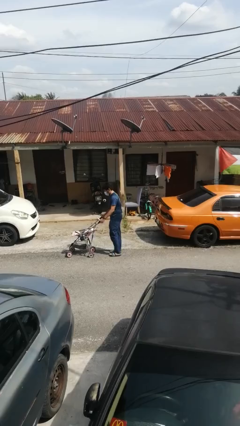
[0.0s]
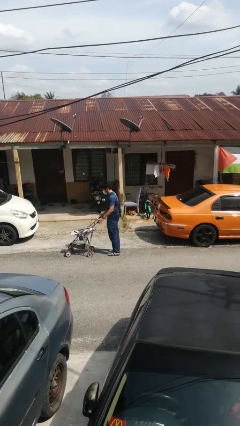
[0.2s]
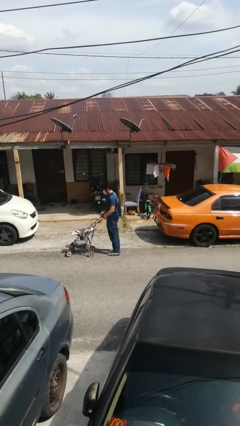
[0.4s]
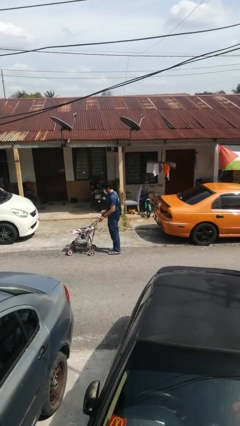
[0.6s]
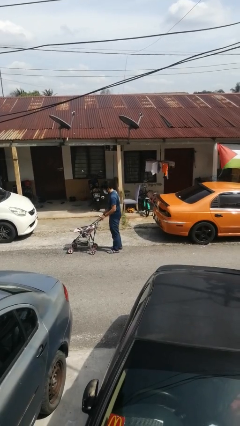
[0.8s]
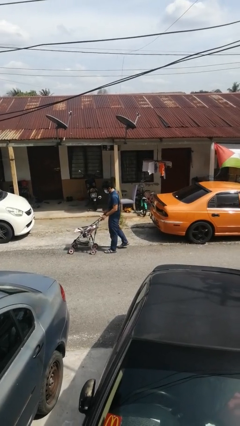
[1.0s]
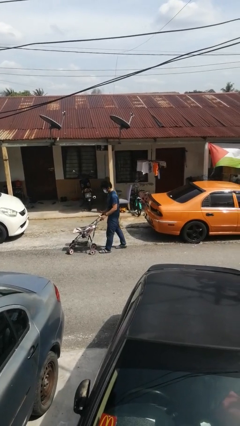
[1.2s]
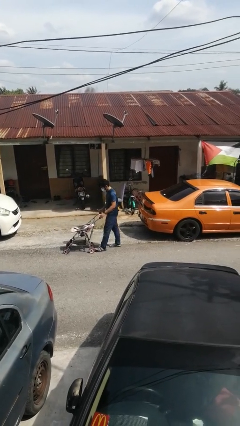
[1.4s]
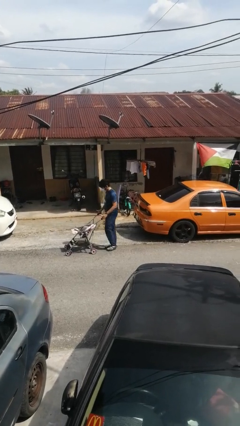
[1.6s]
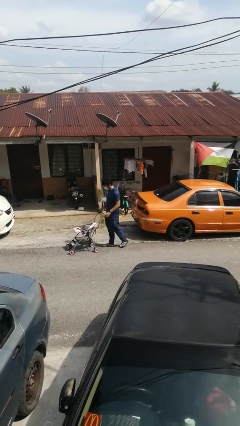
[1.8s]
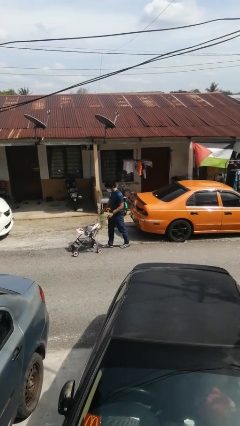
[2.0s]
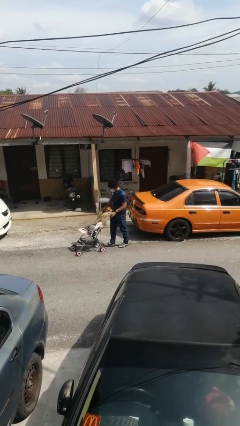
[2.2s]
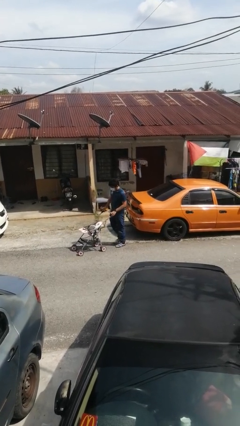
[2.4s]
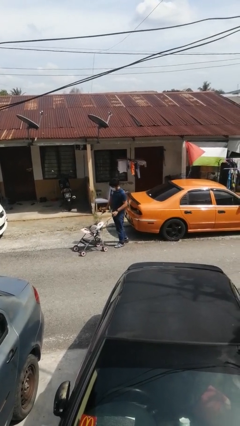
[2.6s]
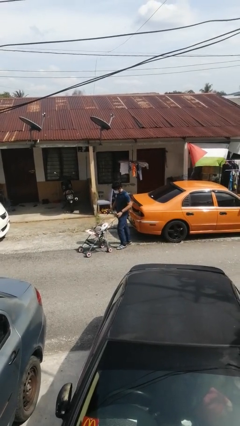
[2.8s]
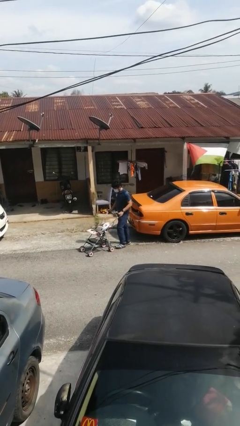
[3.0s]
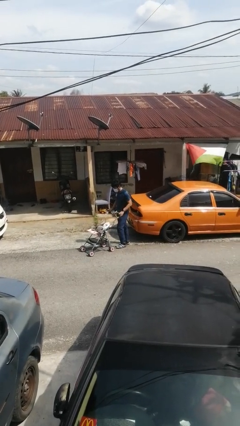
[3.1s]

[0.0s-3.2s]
person pulls wheeled cart

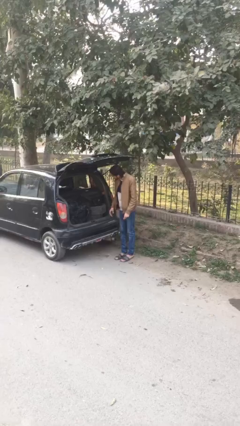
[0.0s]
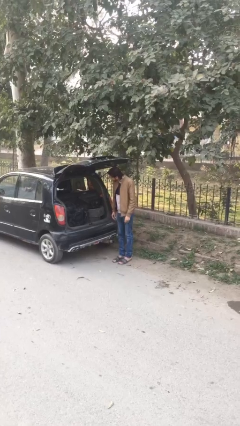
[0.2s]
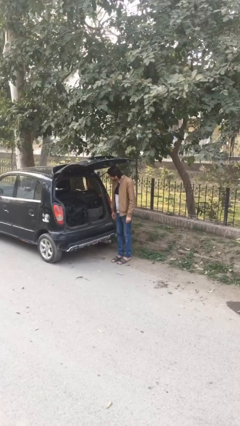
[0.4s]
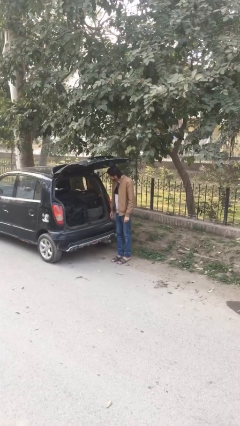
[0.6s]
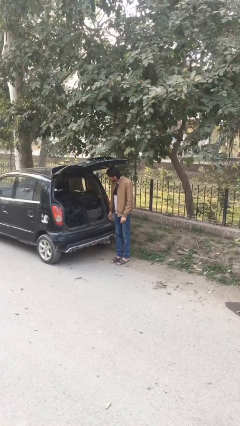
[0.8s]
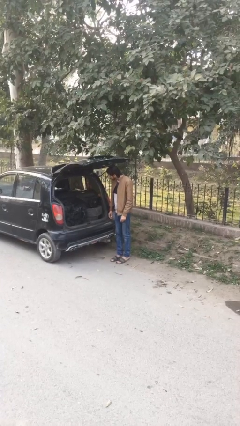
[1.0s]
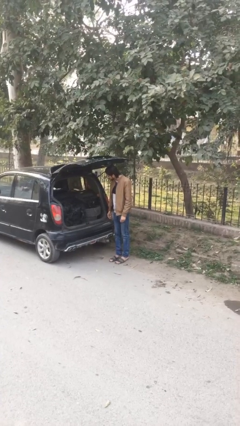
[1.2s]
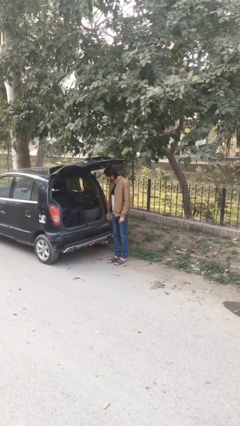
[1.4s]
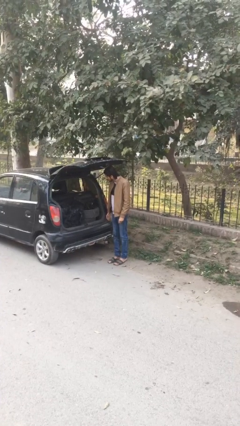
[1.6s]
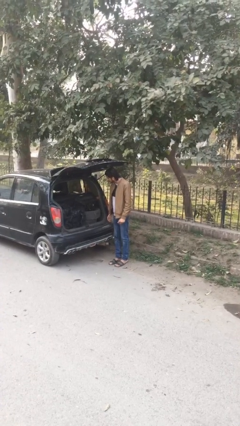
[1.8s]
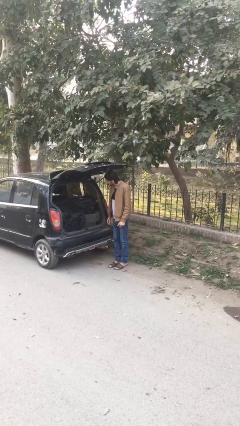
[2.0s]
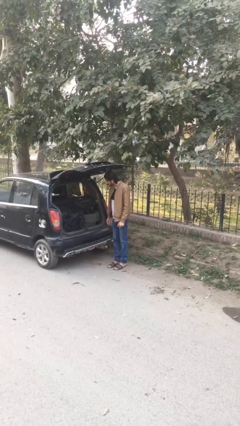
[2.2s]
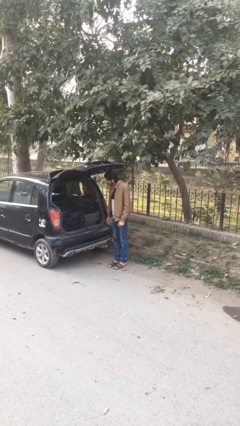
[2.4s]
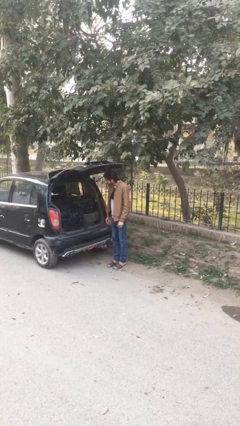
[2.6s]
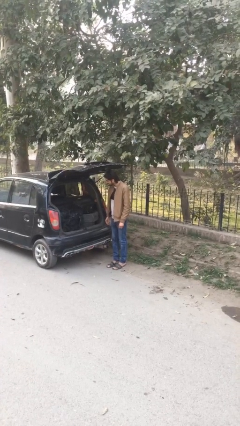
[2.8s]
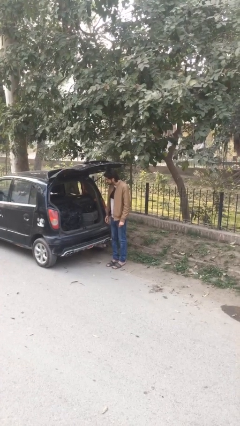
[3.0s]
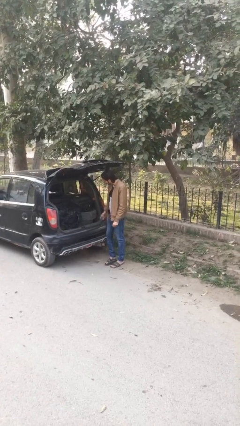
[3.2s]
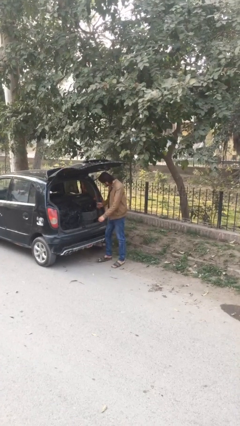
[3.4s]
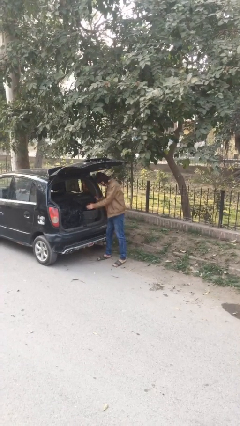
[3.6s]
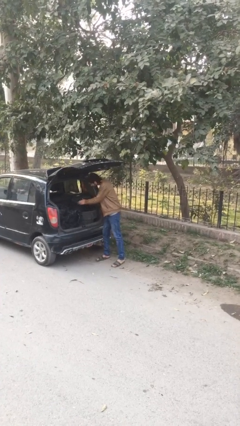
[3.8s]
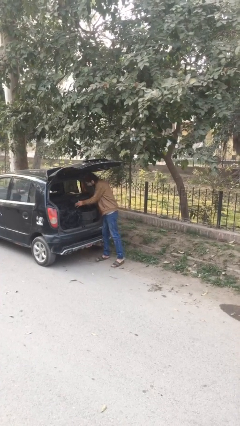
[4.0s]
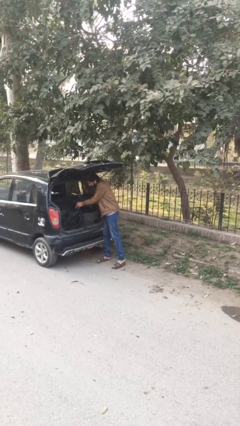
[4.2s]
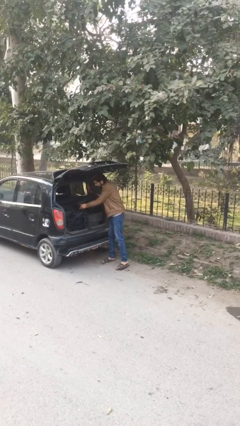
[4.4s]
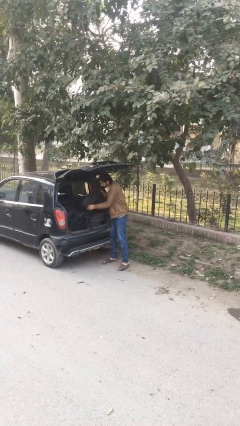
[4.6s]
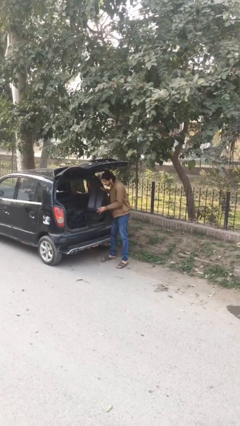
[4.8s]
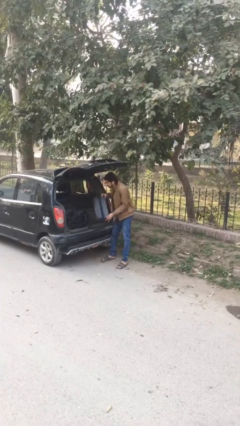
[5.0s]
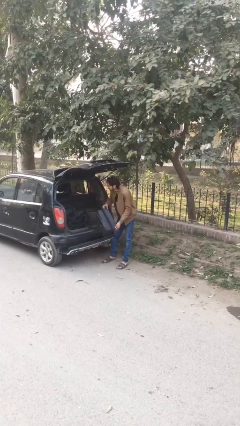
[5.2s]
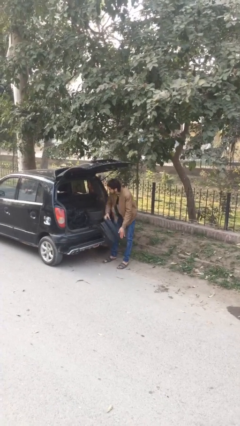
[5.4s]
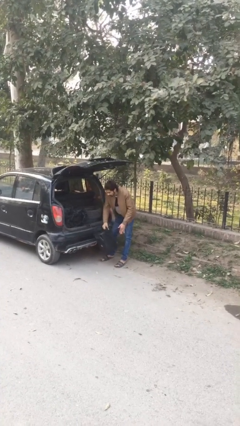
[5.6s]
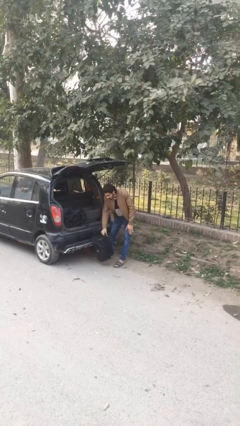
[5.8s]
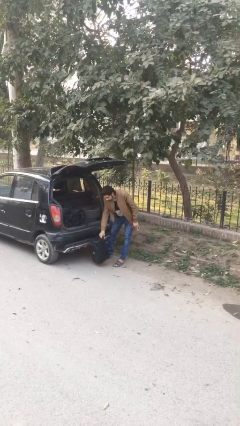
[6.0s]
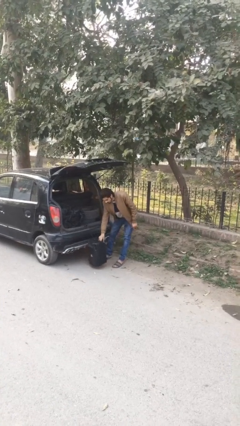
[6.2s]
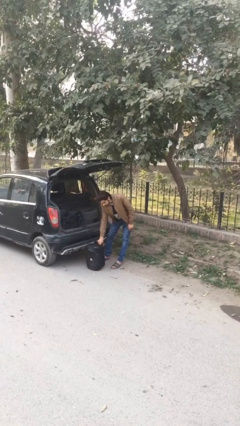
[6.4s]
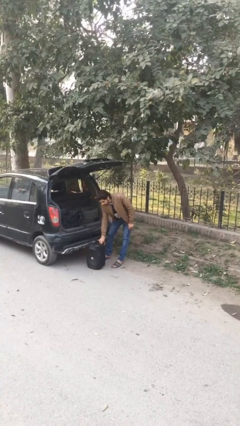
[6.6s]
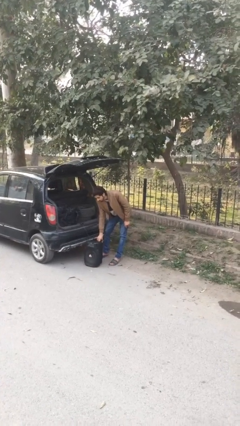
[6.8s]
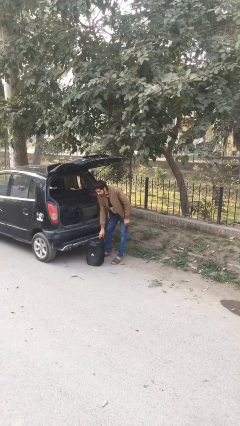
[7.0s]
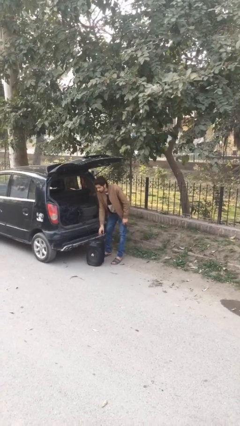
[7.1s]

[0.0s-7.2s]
person unloads car

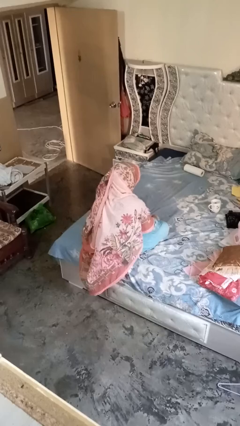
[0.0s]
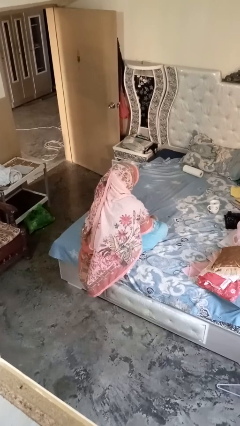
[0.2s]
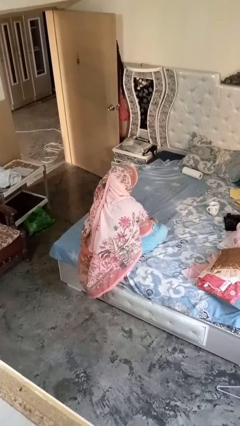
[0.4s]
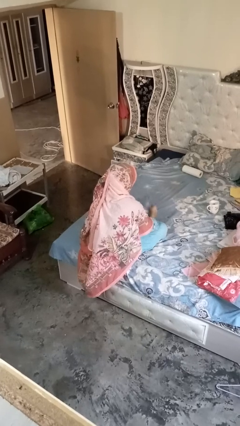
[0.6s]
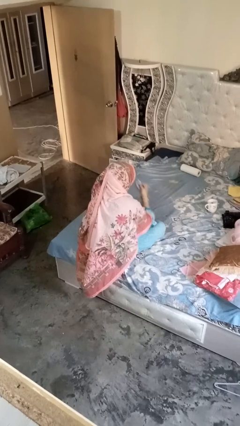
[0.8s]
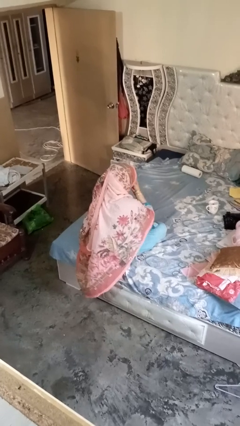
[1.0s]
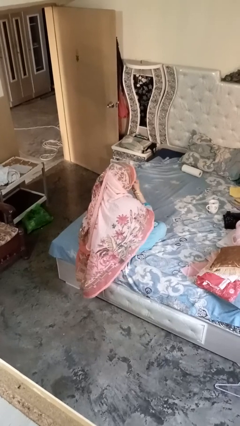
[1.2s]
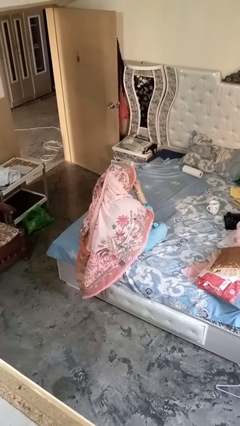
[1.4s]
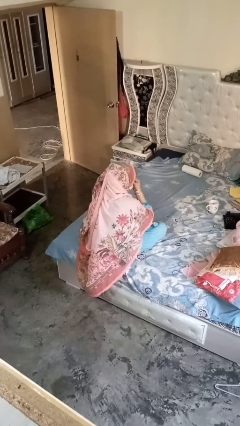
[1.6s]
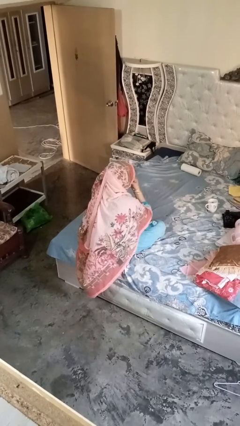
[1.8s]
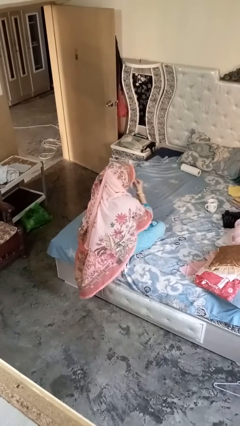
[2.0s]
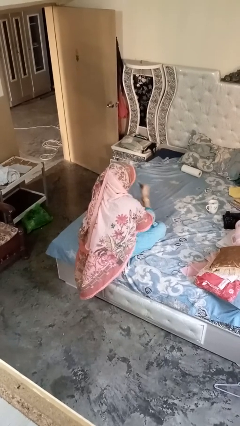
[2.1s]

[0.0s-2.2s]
person blows nose

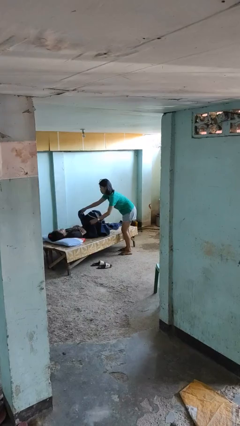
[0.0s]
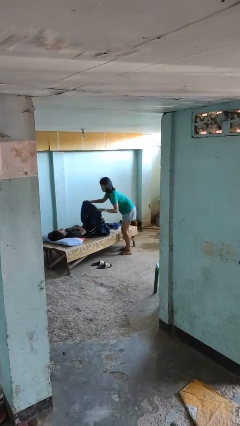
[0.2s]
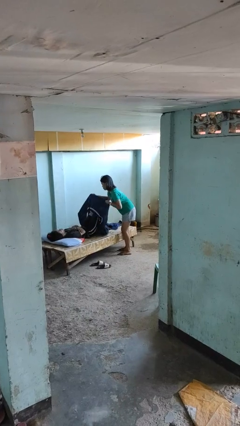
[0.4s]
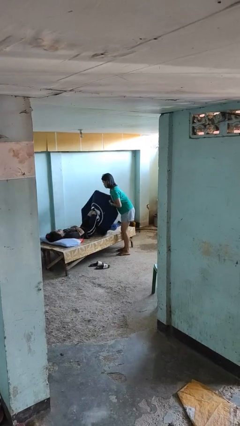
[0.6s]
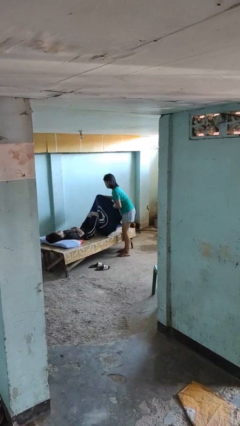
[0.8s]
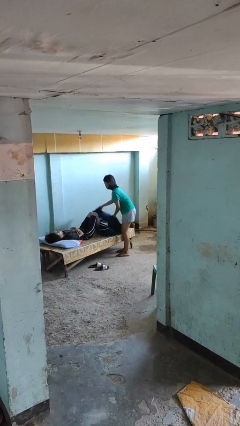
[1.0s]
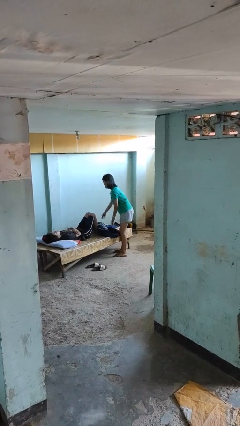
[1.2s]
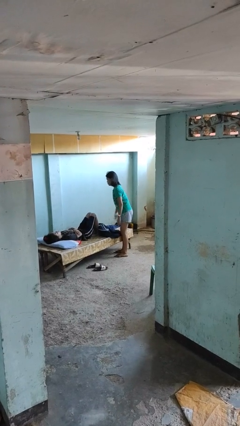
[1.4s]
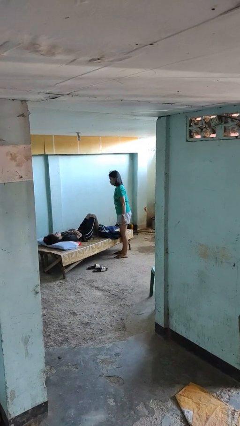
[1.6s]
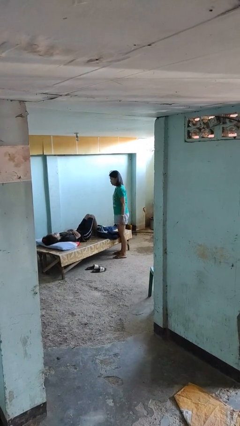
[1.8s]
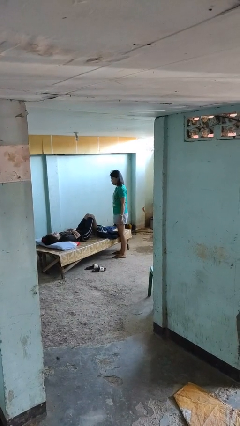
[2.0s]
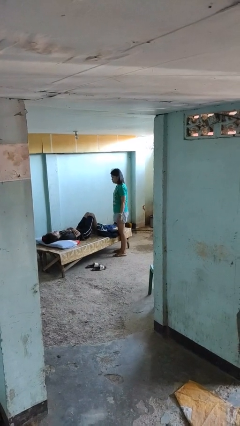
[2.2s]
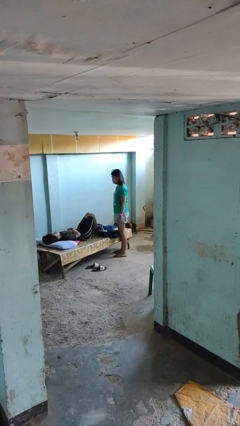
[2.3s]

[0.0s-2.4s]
person uncovers friend with blanket

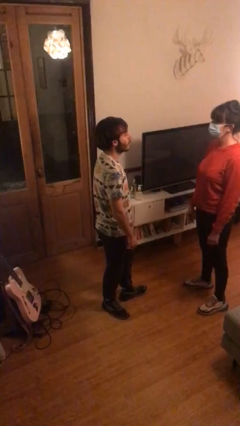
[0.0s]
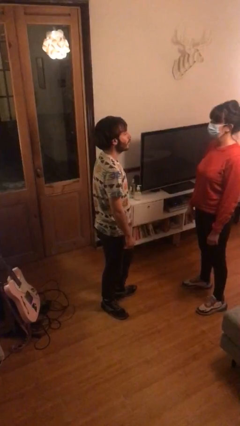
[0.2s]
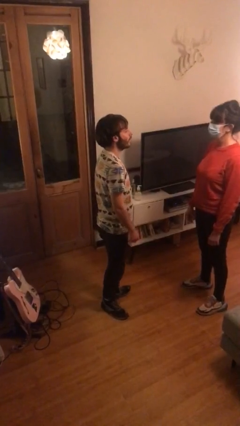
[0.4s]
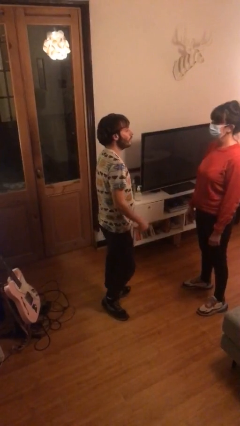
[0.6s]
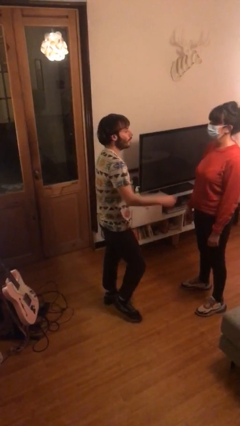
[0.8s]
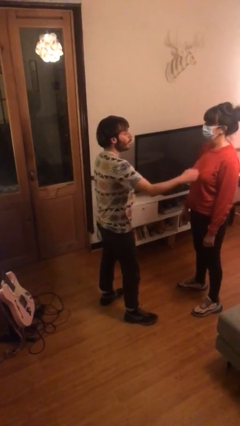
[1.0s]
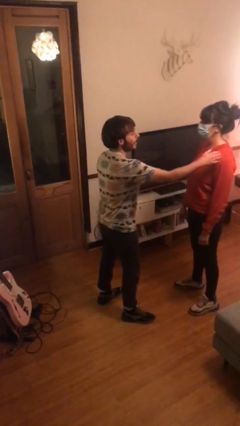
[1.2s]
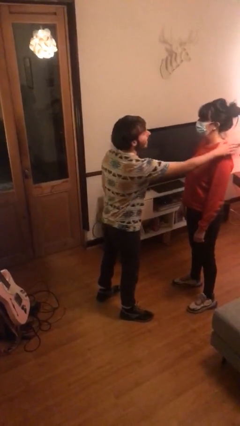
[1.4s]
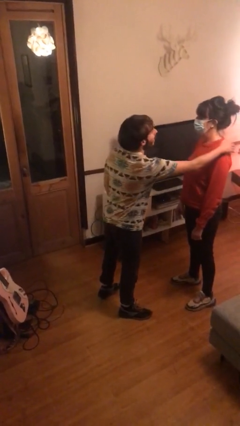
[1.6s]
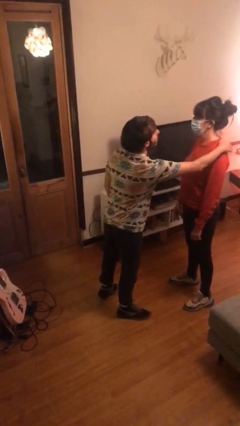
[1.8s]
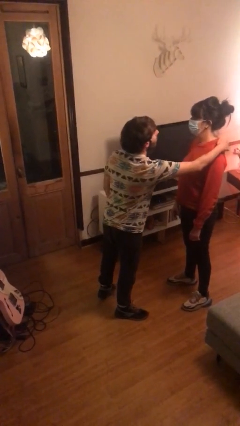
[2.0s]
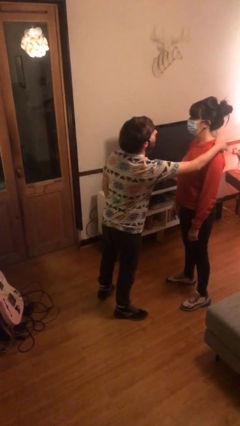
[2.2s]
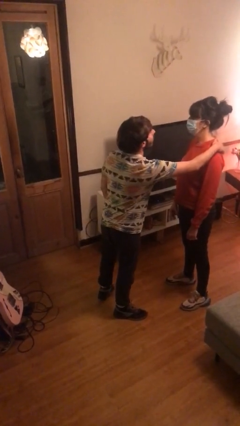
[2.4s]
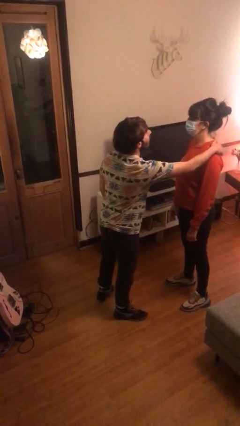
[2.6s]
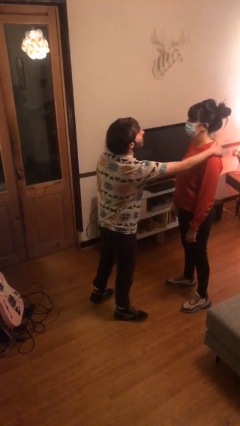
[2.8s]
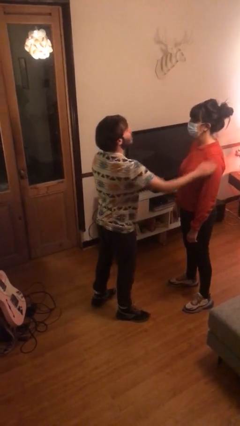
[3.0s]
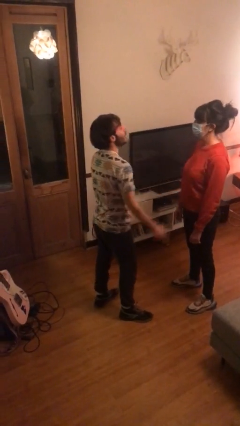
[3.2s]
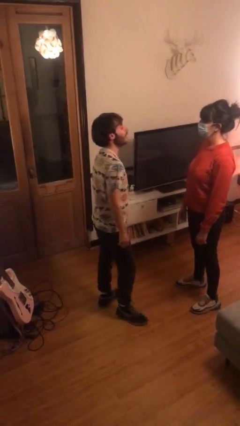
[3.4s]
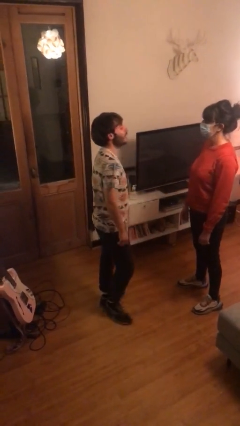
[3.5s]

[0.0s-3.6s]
person pounds shoulders of person
